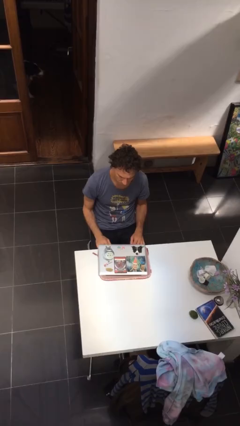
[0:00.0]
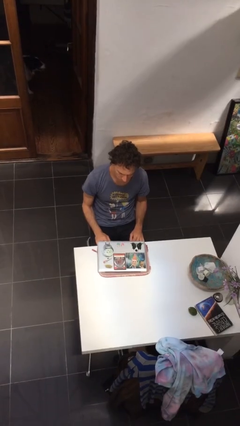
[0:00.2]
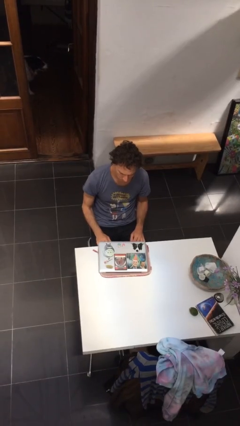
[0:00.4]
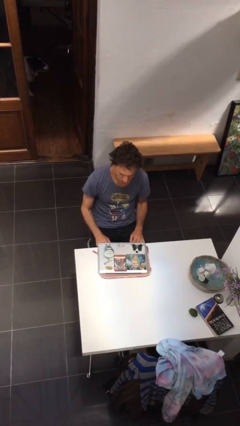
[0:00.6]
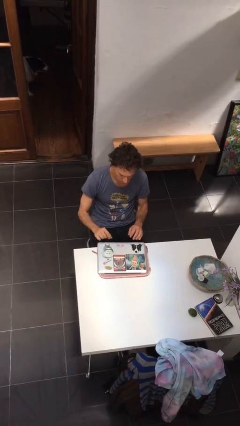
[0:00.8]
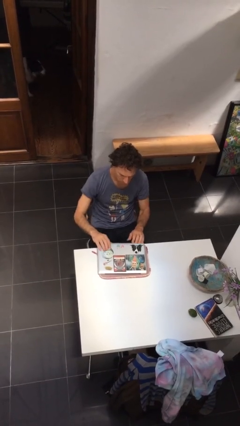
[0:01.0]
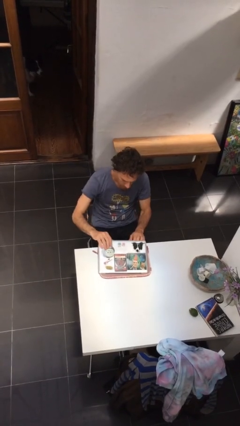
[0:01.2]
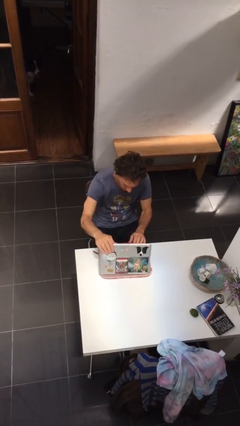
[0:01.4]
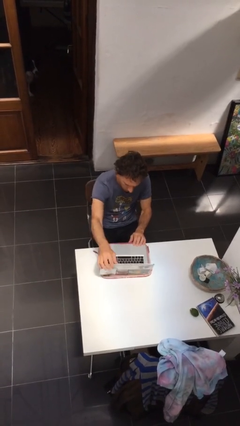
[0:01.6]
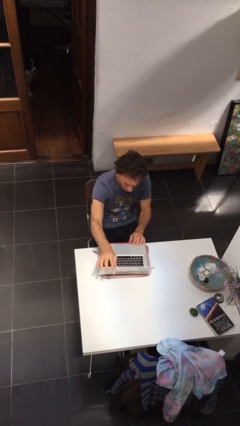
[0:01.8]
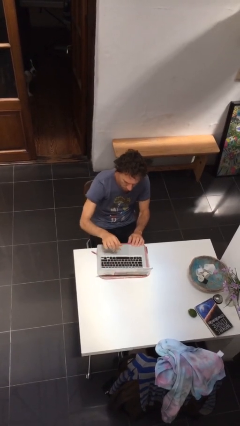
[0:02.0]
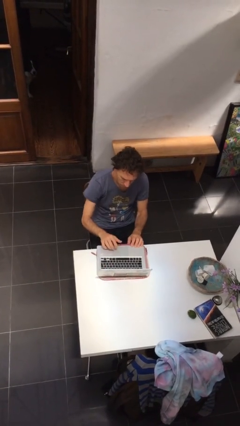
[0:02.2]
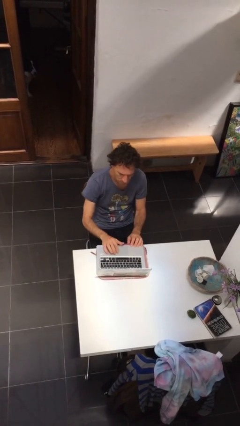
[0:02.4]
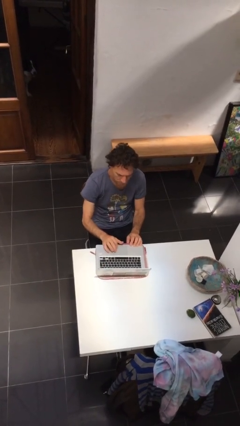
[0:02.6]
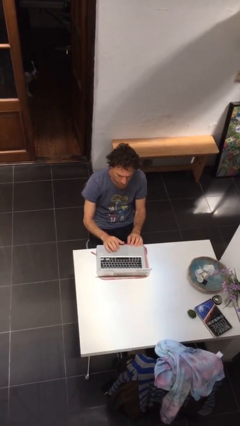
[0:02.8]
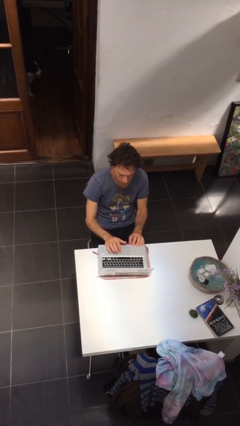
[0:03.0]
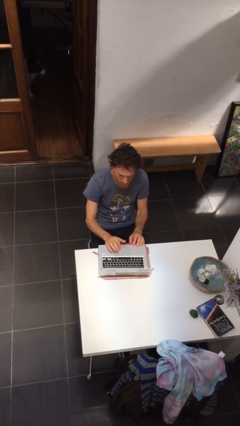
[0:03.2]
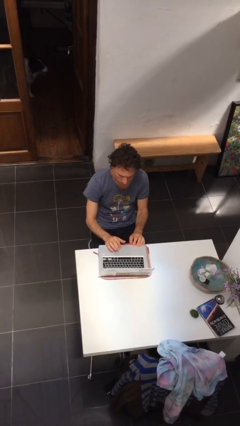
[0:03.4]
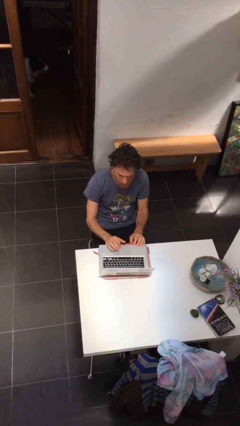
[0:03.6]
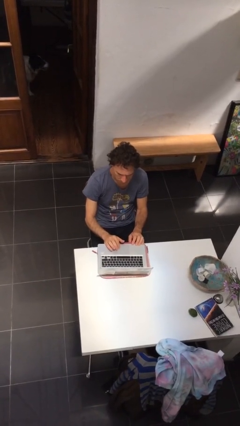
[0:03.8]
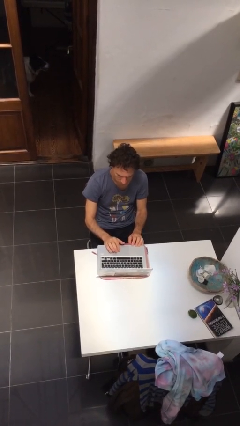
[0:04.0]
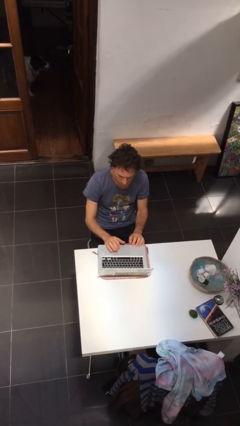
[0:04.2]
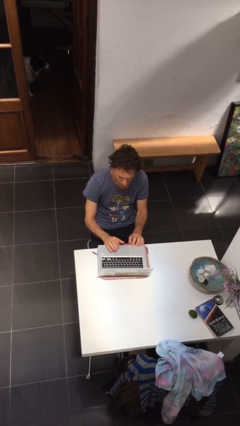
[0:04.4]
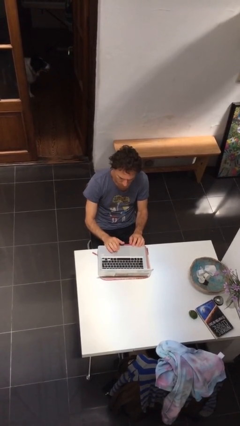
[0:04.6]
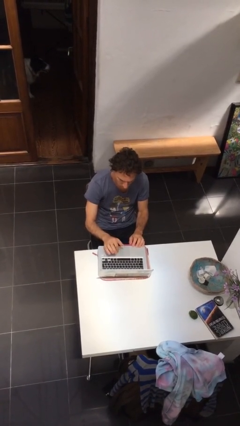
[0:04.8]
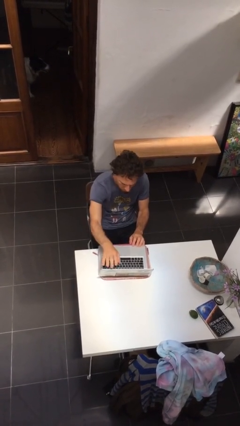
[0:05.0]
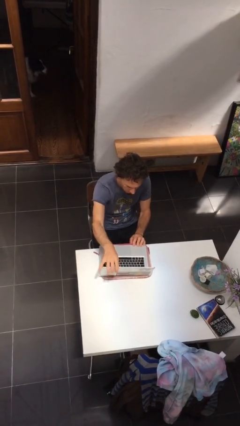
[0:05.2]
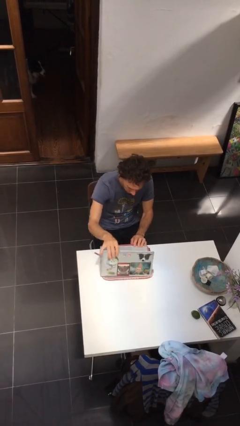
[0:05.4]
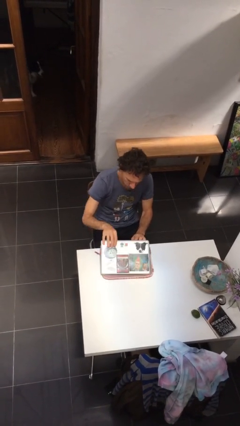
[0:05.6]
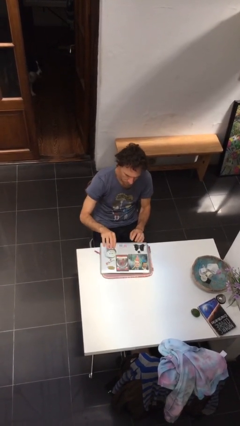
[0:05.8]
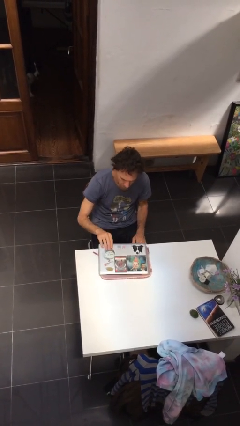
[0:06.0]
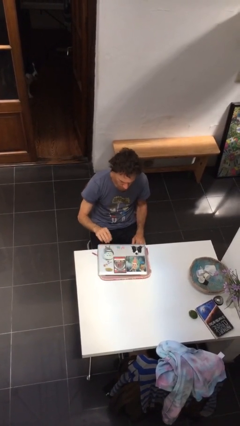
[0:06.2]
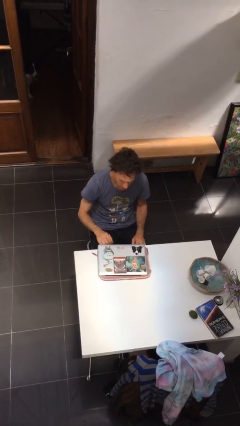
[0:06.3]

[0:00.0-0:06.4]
person interacts with laptop

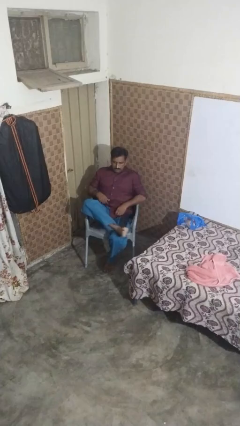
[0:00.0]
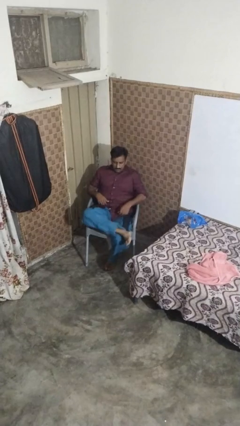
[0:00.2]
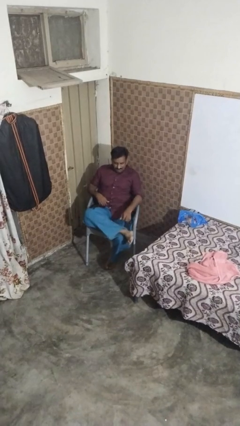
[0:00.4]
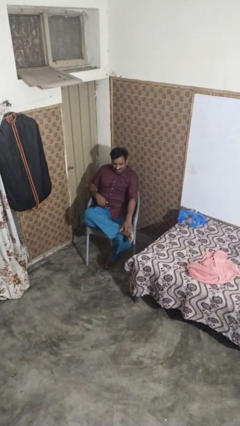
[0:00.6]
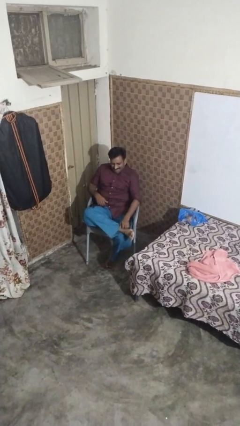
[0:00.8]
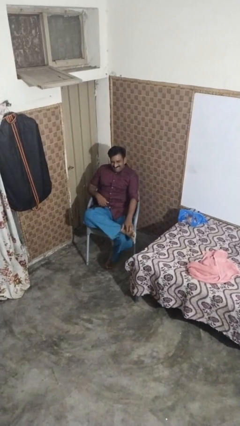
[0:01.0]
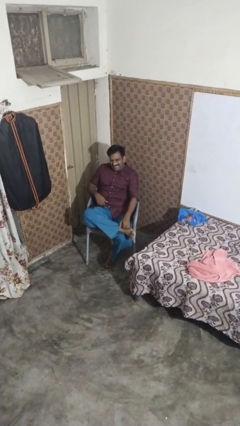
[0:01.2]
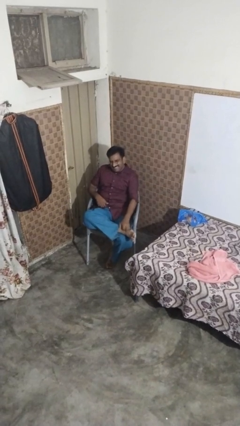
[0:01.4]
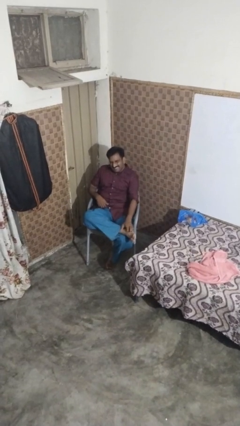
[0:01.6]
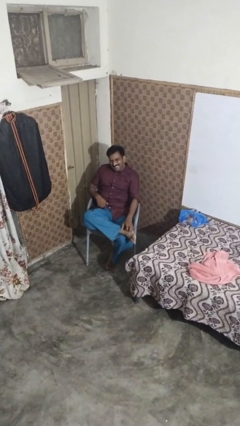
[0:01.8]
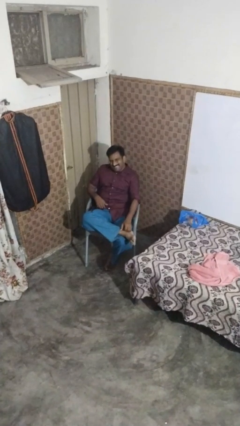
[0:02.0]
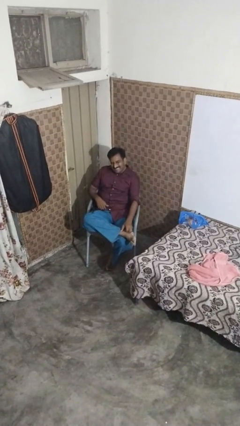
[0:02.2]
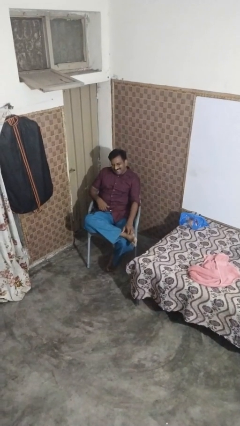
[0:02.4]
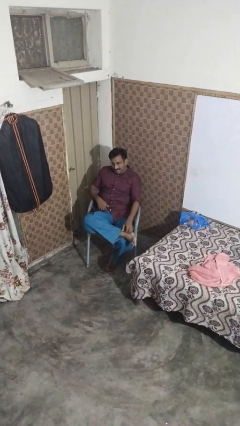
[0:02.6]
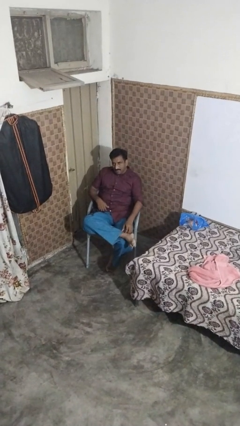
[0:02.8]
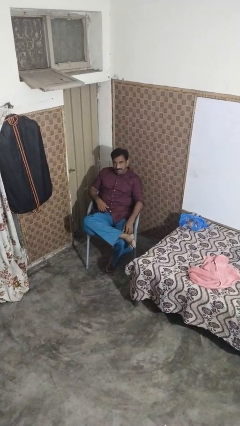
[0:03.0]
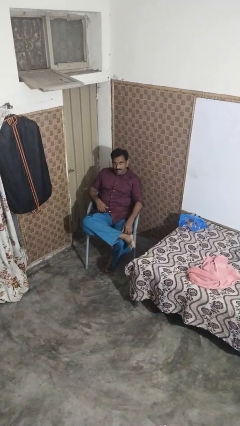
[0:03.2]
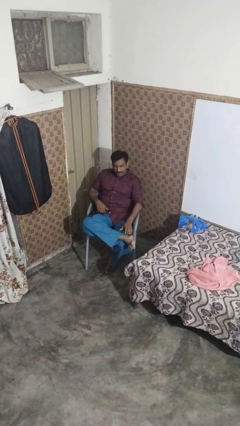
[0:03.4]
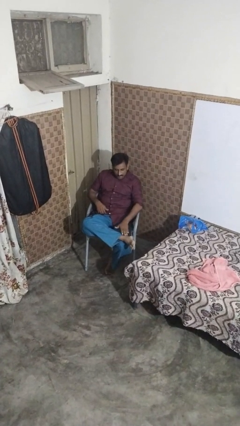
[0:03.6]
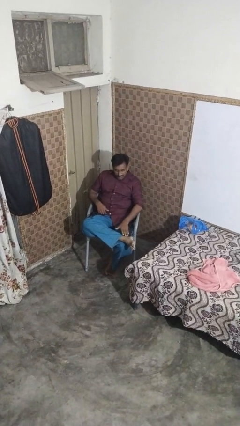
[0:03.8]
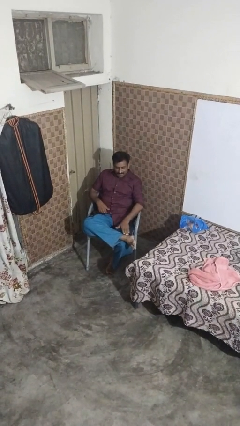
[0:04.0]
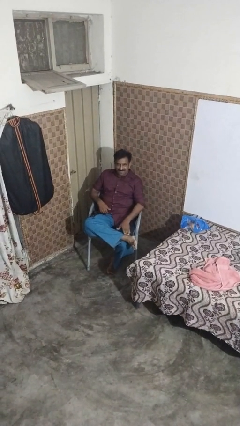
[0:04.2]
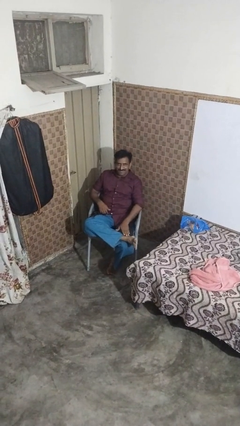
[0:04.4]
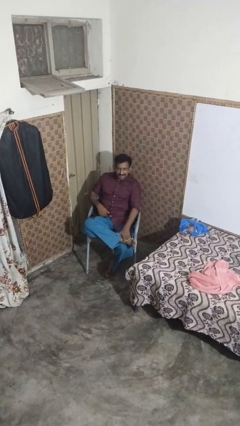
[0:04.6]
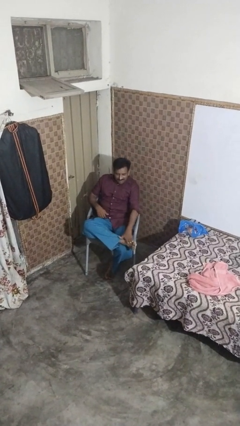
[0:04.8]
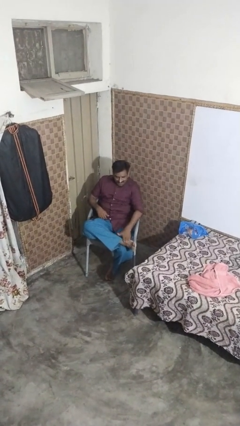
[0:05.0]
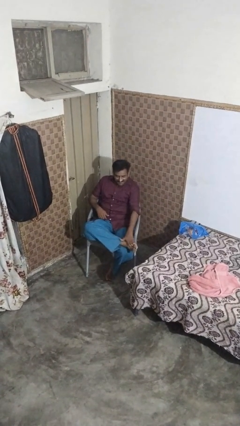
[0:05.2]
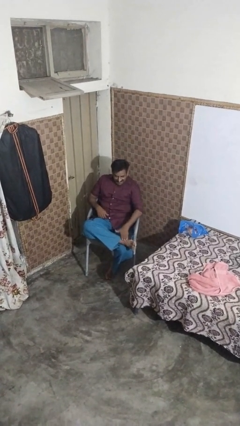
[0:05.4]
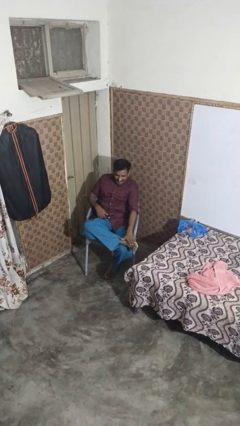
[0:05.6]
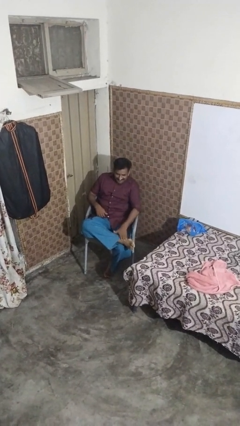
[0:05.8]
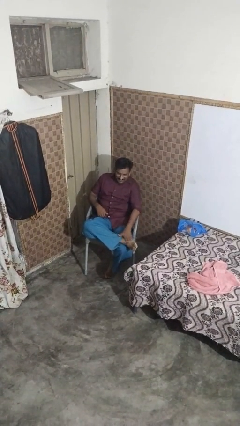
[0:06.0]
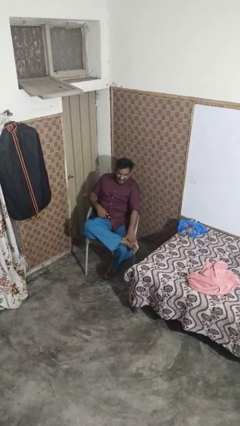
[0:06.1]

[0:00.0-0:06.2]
person rubs foot

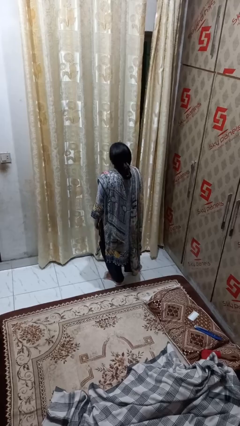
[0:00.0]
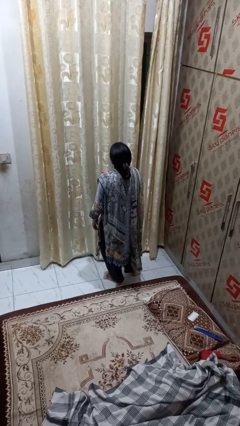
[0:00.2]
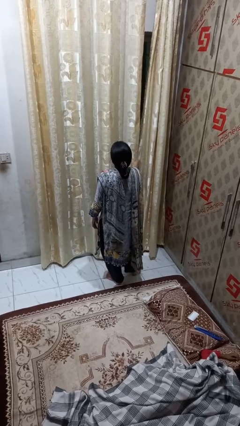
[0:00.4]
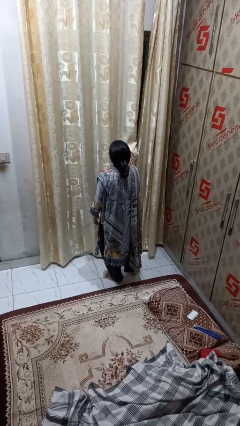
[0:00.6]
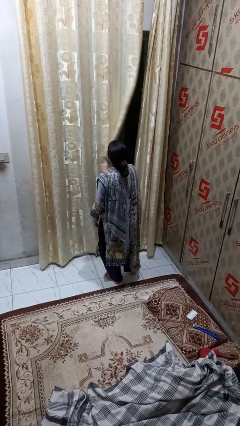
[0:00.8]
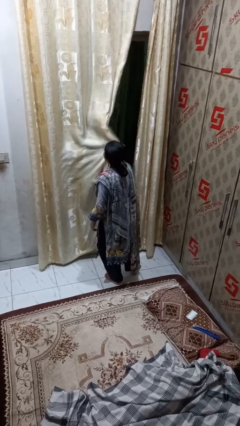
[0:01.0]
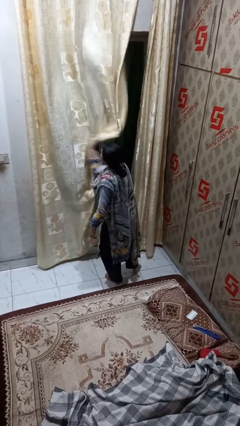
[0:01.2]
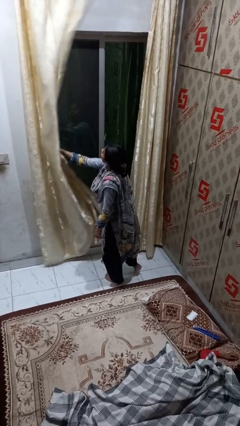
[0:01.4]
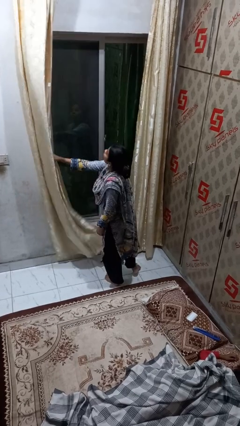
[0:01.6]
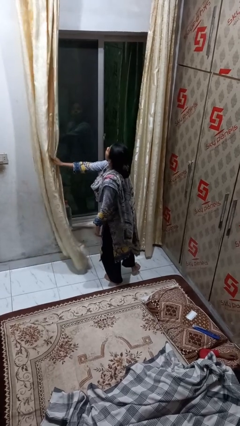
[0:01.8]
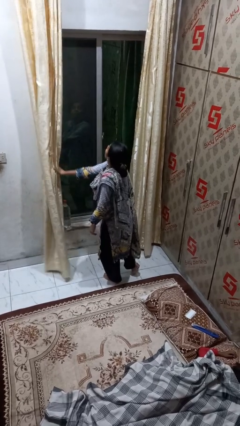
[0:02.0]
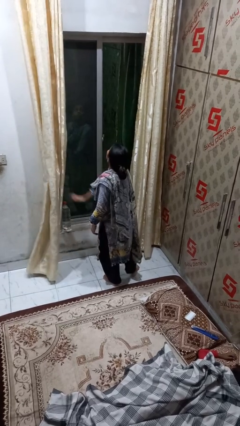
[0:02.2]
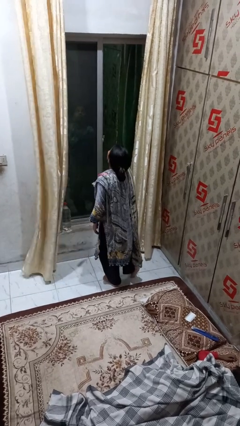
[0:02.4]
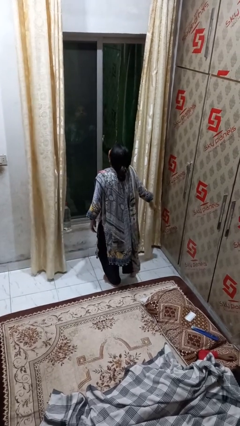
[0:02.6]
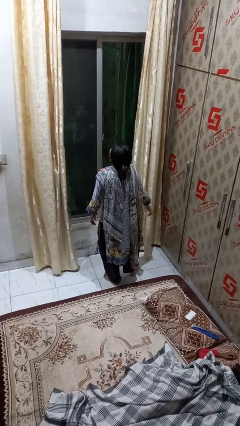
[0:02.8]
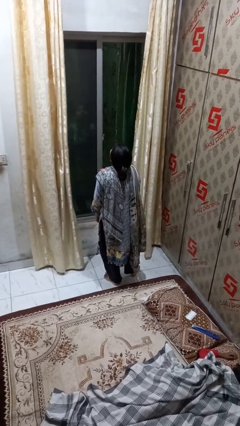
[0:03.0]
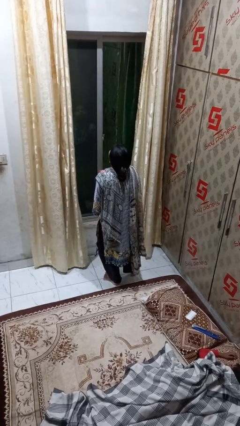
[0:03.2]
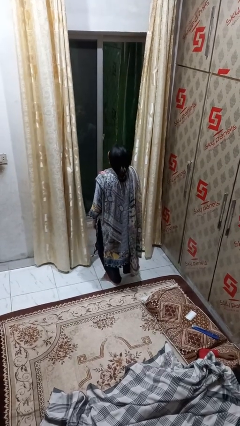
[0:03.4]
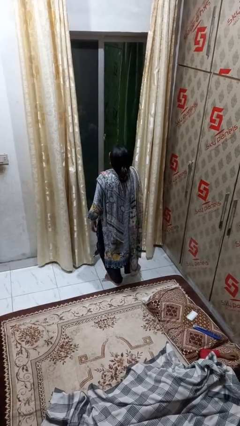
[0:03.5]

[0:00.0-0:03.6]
person opens curtains

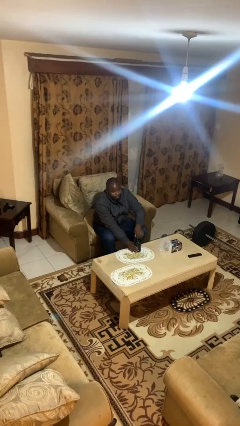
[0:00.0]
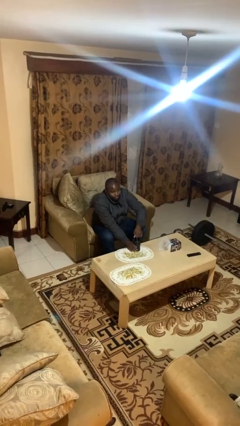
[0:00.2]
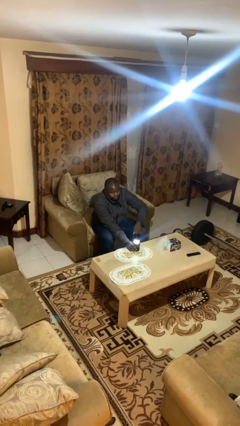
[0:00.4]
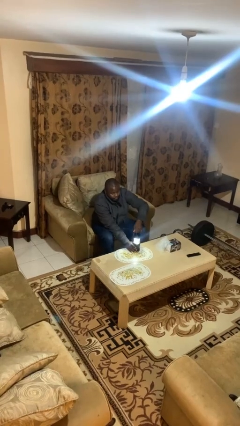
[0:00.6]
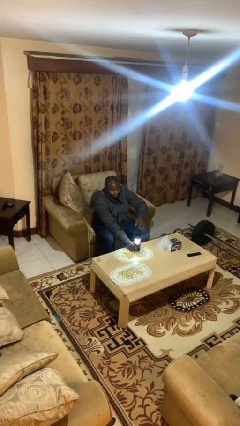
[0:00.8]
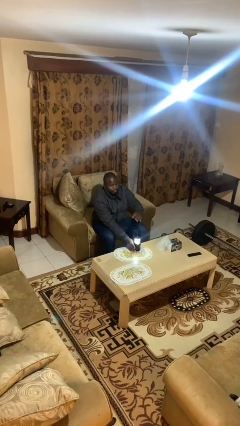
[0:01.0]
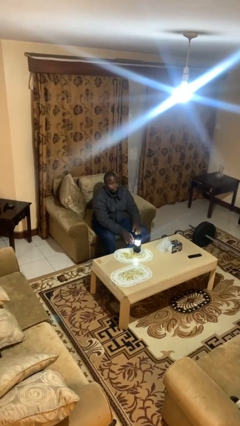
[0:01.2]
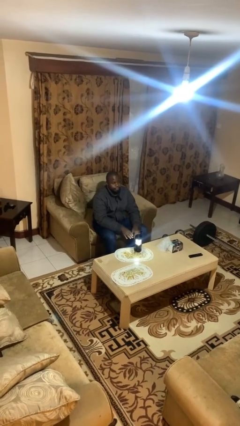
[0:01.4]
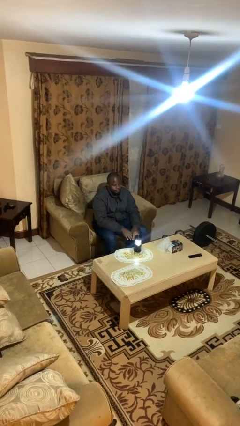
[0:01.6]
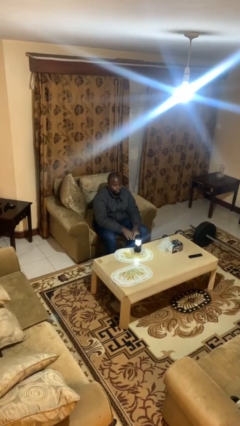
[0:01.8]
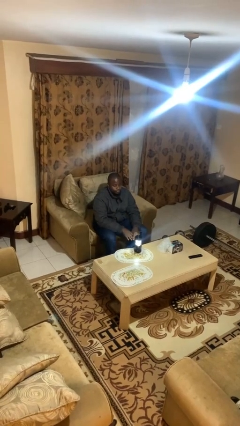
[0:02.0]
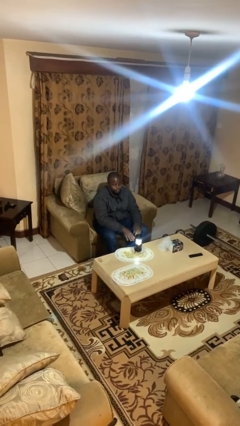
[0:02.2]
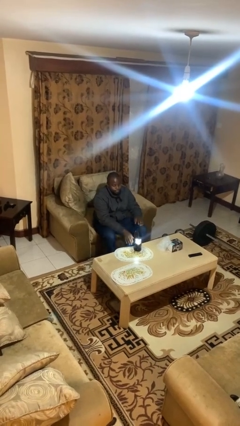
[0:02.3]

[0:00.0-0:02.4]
person turns on lamp
